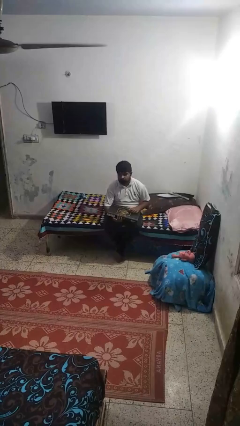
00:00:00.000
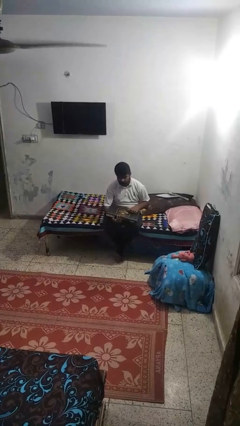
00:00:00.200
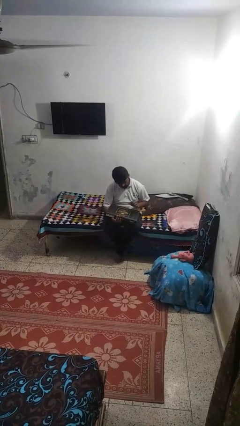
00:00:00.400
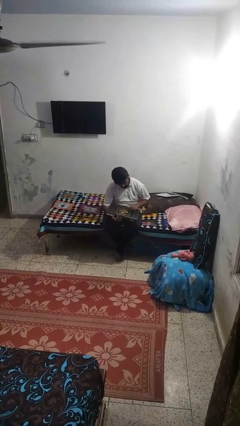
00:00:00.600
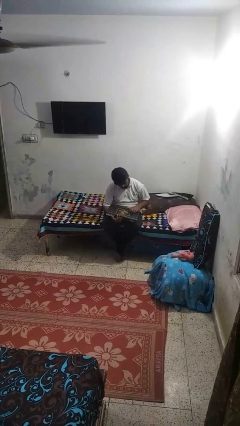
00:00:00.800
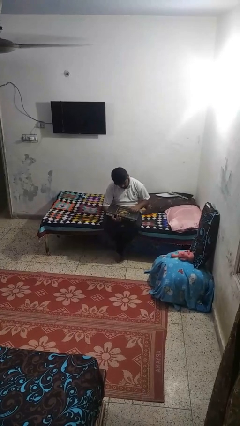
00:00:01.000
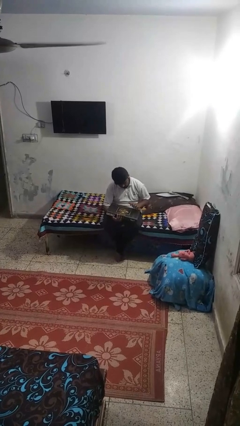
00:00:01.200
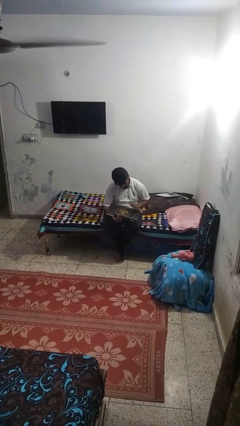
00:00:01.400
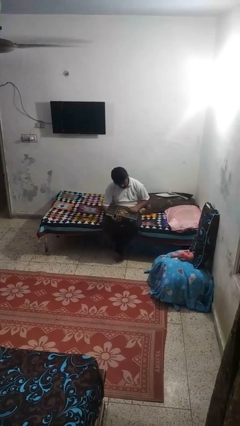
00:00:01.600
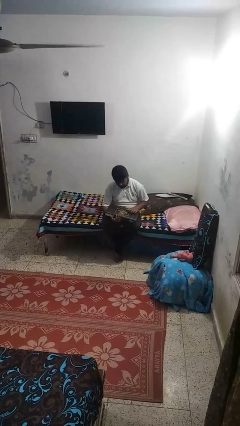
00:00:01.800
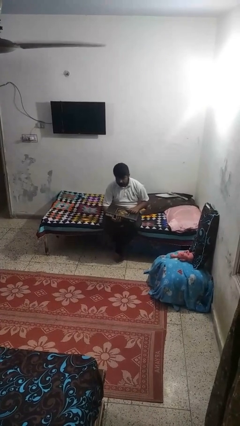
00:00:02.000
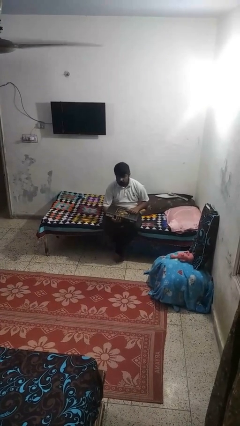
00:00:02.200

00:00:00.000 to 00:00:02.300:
person taps object with finger

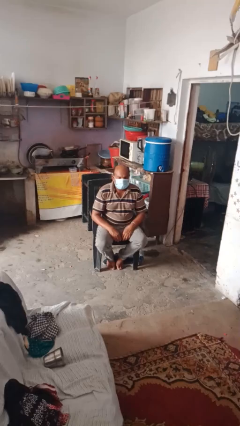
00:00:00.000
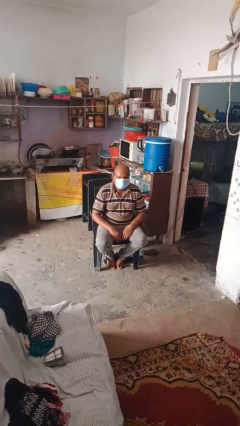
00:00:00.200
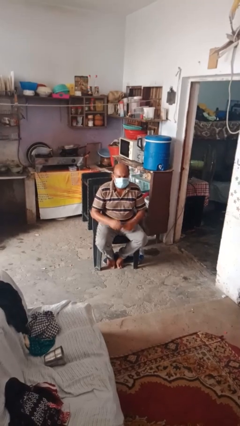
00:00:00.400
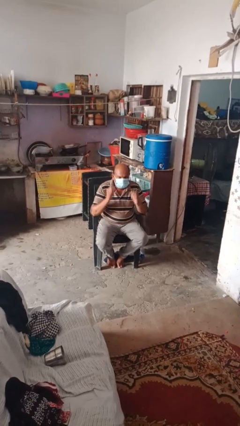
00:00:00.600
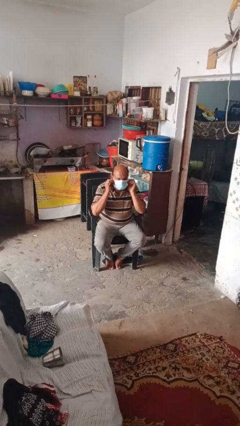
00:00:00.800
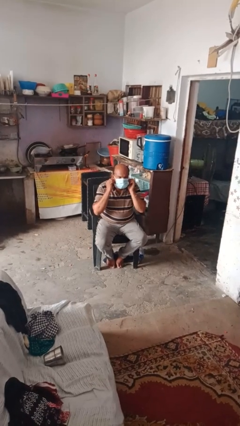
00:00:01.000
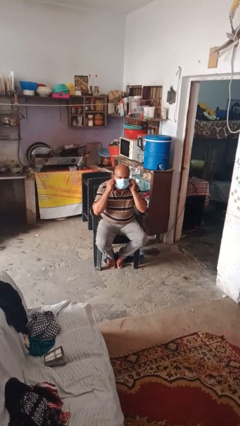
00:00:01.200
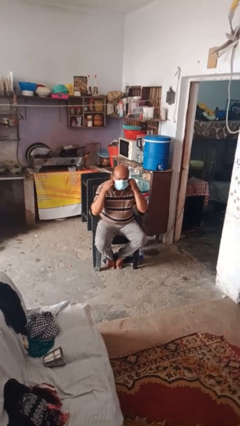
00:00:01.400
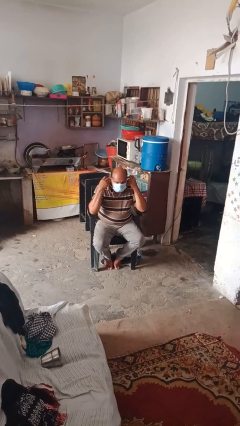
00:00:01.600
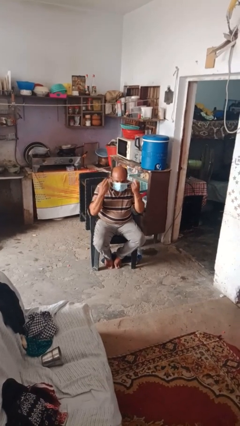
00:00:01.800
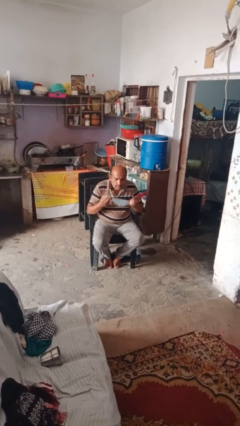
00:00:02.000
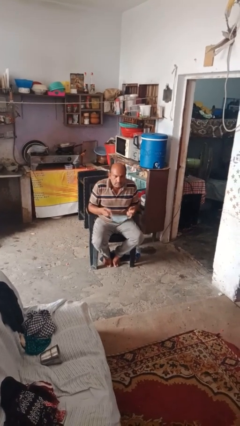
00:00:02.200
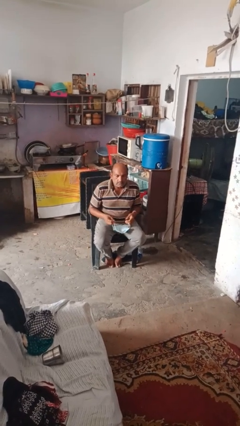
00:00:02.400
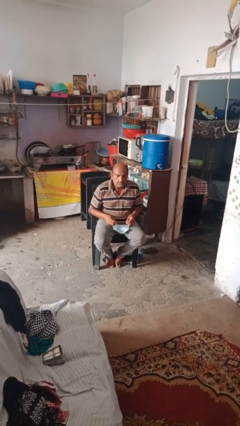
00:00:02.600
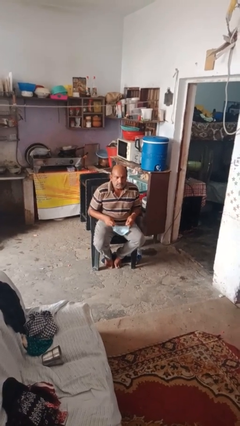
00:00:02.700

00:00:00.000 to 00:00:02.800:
person takes off facemask

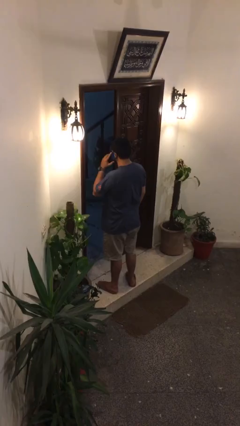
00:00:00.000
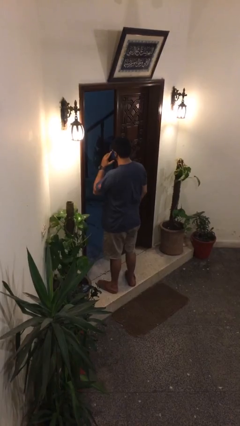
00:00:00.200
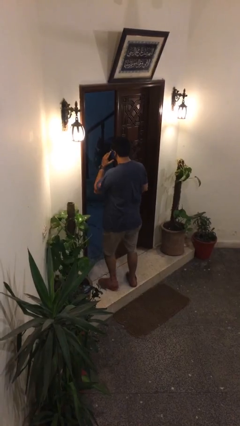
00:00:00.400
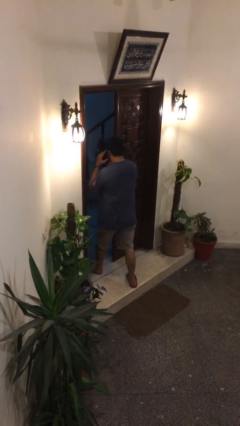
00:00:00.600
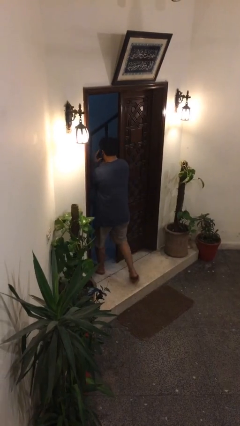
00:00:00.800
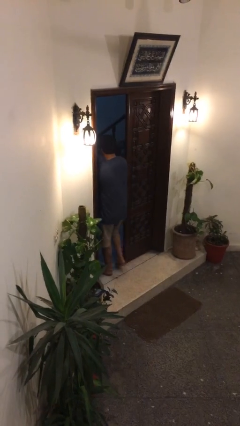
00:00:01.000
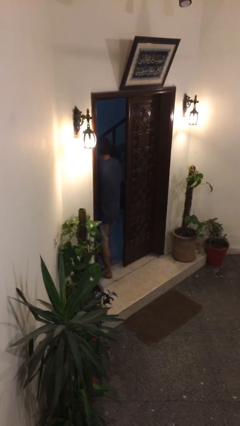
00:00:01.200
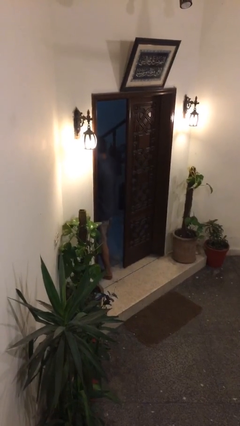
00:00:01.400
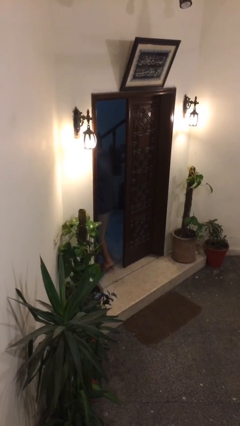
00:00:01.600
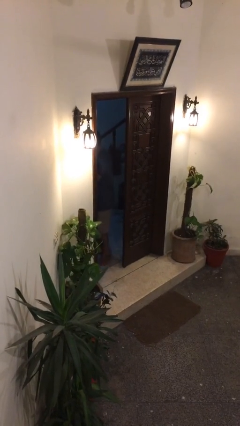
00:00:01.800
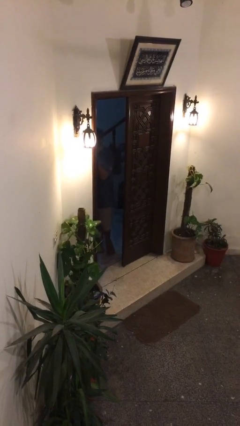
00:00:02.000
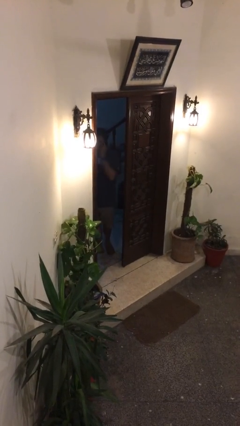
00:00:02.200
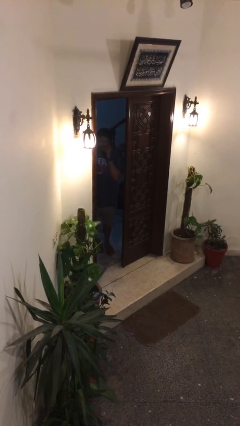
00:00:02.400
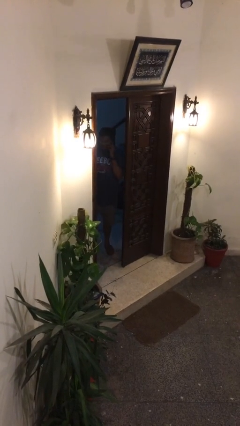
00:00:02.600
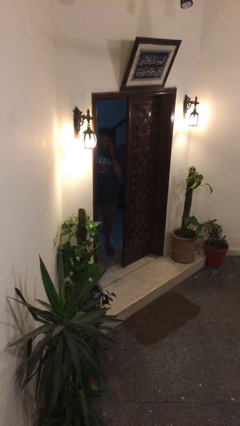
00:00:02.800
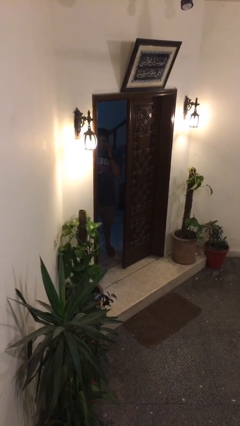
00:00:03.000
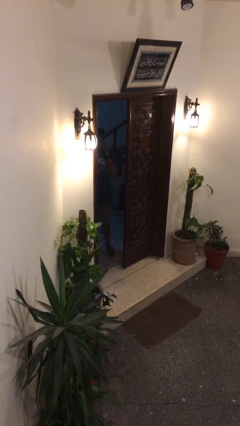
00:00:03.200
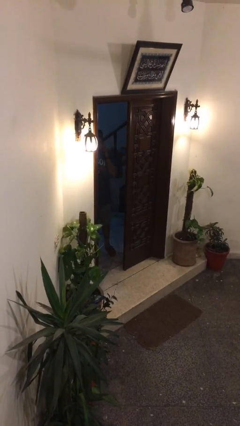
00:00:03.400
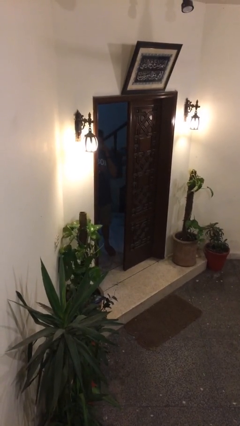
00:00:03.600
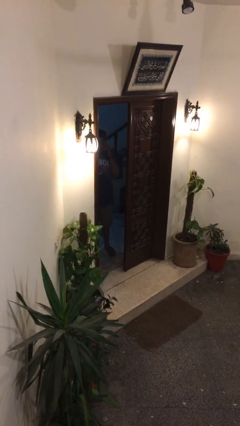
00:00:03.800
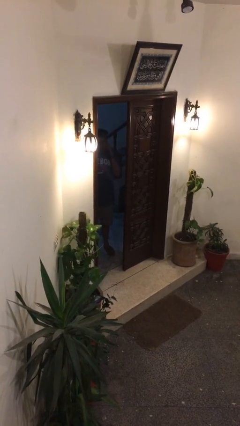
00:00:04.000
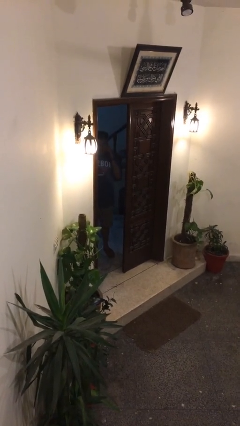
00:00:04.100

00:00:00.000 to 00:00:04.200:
person exits scene through structure

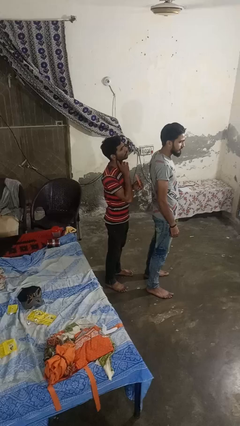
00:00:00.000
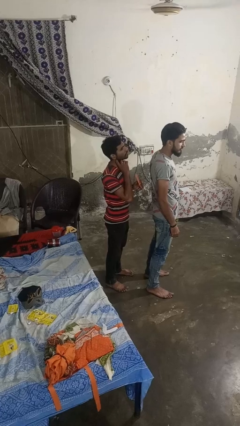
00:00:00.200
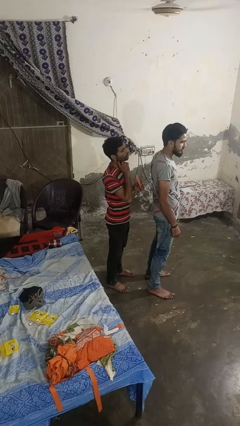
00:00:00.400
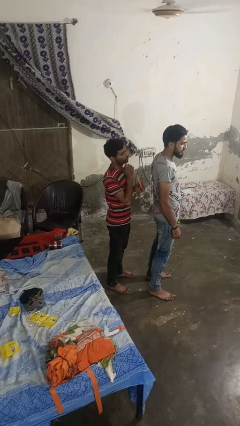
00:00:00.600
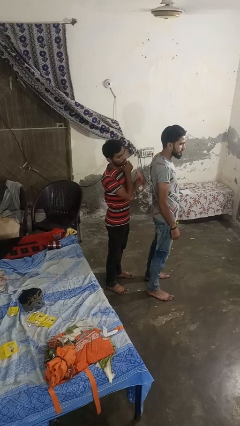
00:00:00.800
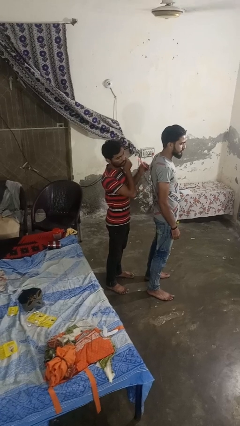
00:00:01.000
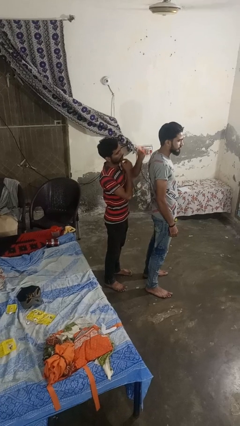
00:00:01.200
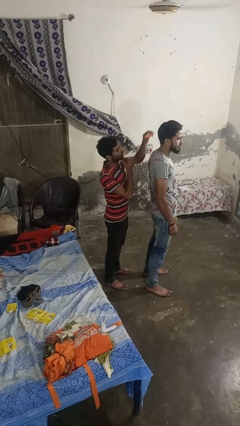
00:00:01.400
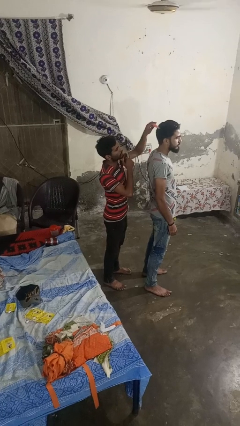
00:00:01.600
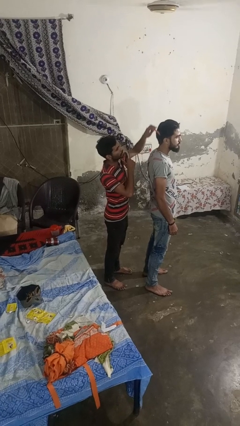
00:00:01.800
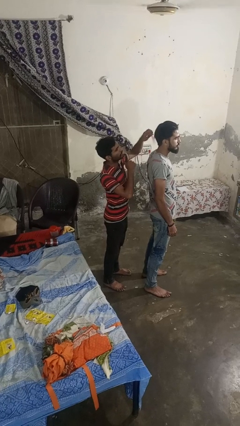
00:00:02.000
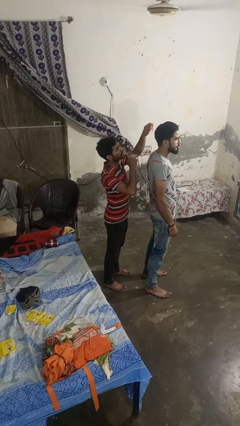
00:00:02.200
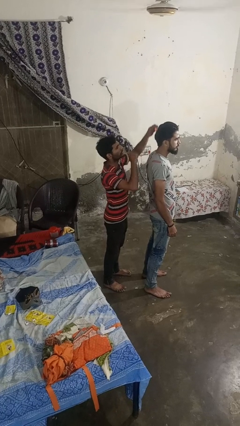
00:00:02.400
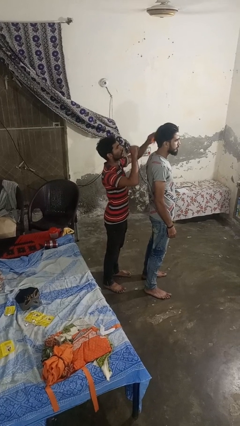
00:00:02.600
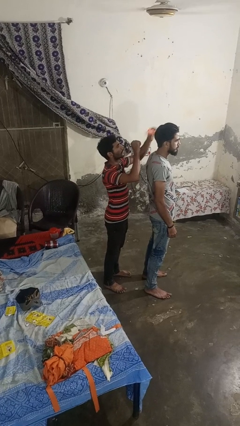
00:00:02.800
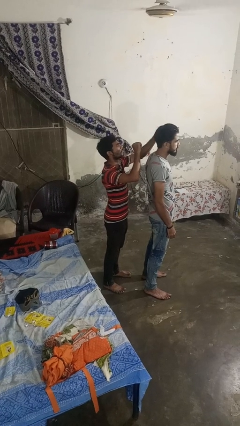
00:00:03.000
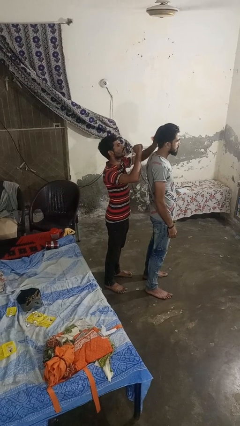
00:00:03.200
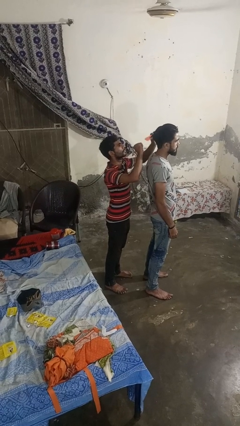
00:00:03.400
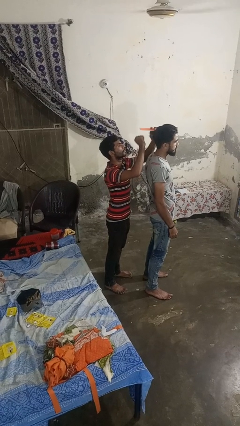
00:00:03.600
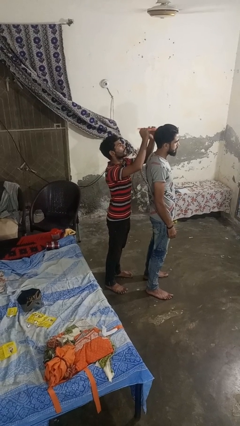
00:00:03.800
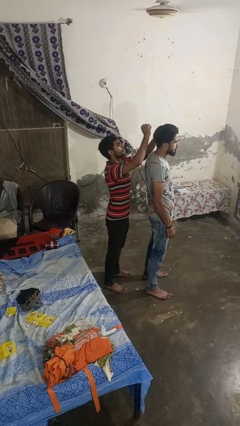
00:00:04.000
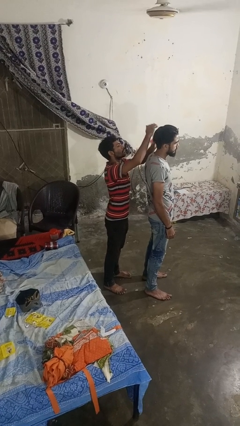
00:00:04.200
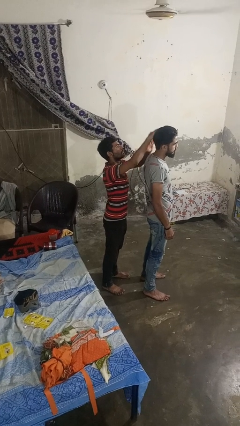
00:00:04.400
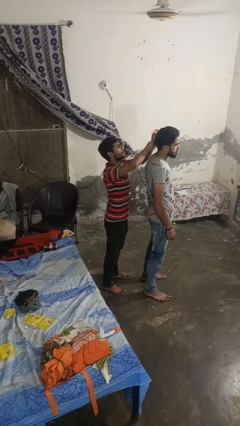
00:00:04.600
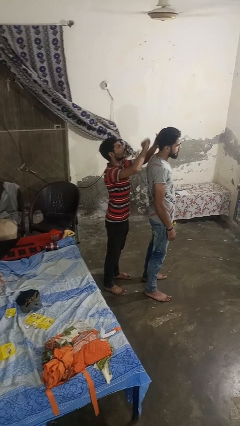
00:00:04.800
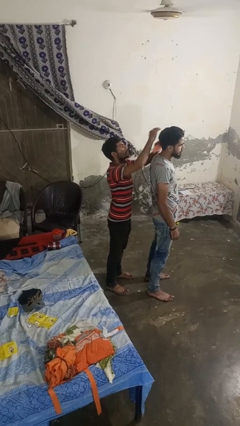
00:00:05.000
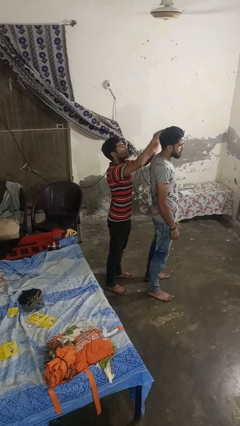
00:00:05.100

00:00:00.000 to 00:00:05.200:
person brushes hair of person

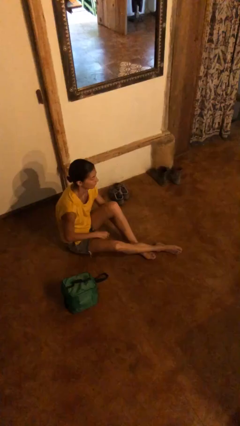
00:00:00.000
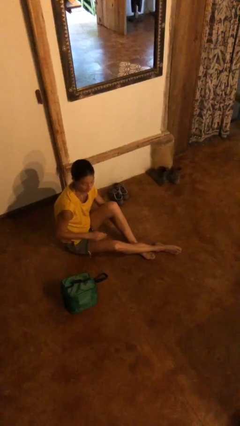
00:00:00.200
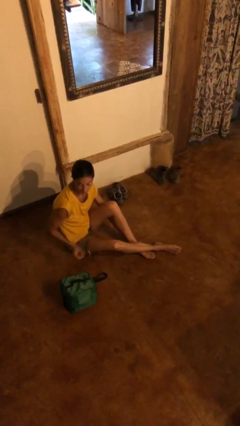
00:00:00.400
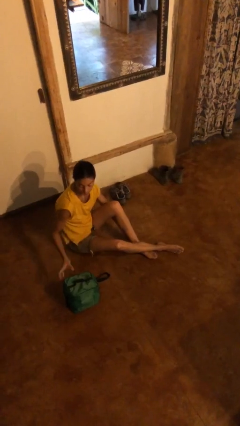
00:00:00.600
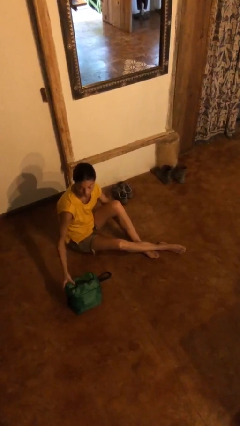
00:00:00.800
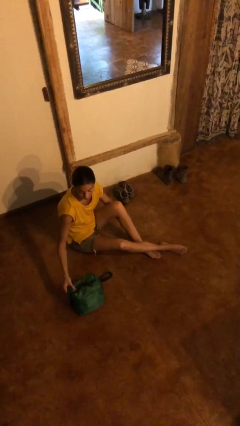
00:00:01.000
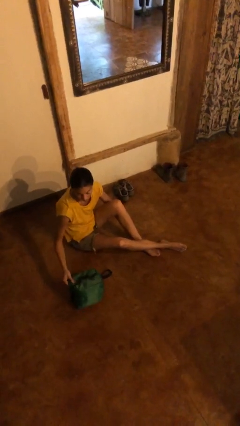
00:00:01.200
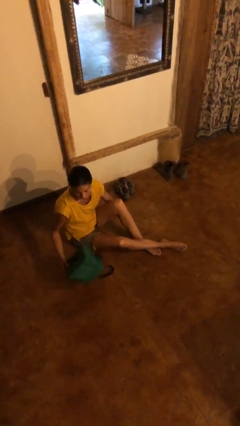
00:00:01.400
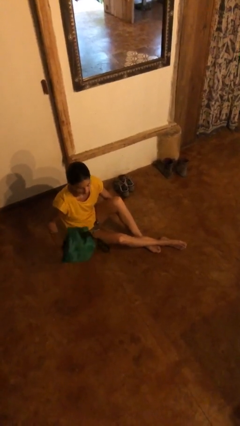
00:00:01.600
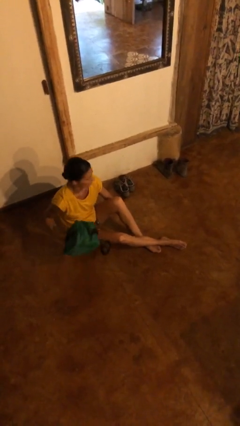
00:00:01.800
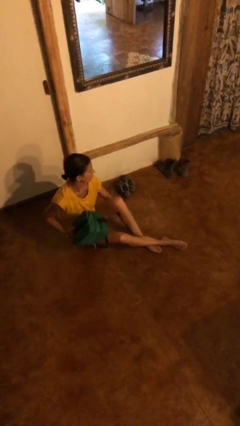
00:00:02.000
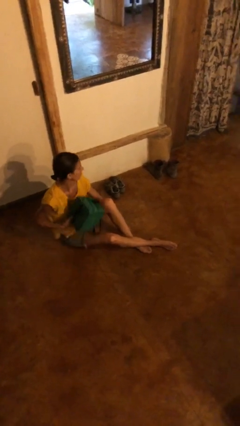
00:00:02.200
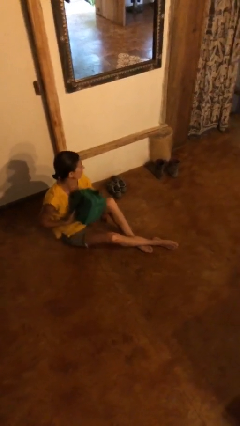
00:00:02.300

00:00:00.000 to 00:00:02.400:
person picks up object from floor

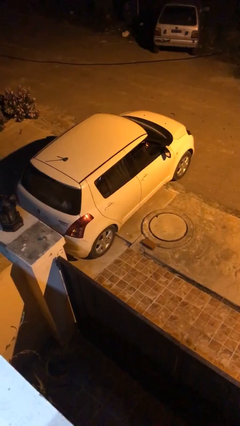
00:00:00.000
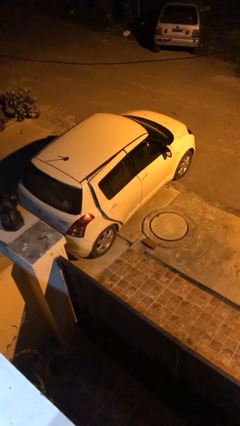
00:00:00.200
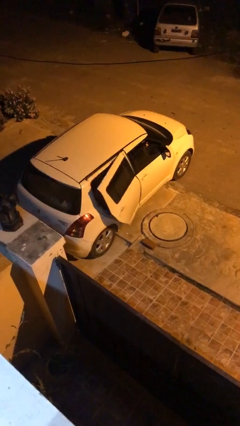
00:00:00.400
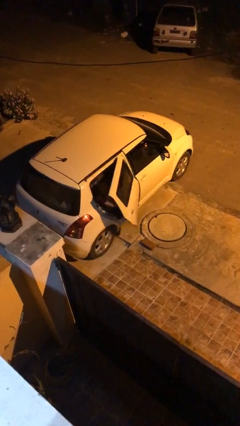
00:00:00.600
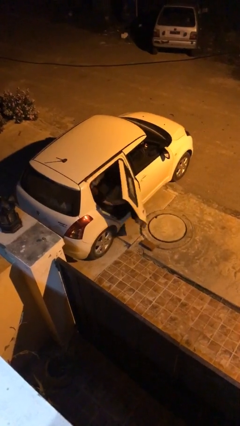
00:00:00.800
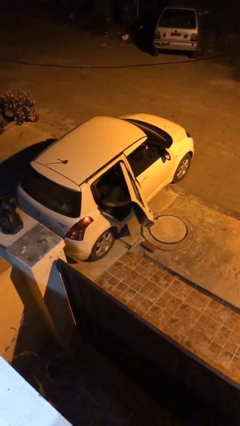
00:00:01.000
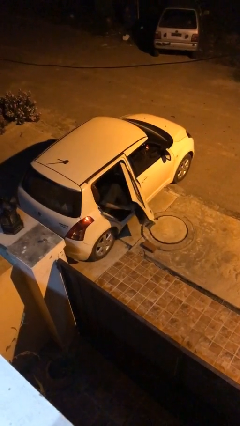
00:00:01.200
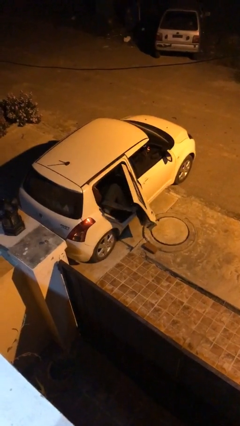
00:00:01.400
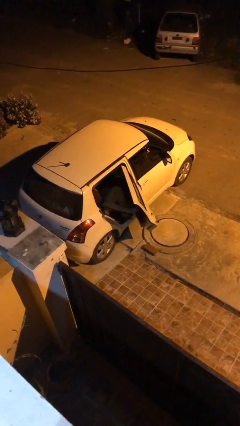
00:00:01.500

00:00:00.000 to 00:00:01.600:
person opens car door
